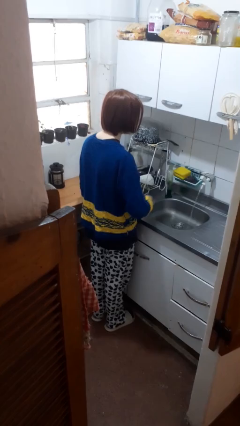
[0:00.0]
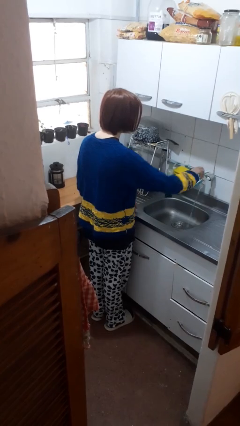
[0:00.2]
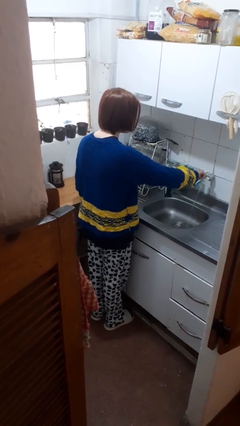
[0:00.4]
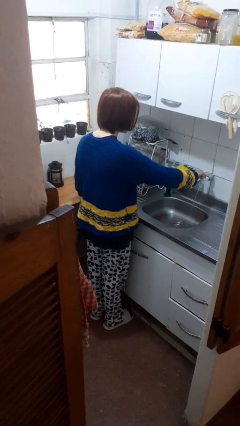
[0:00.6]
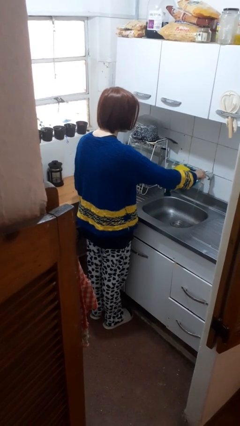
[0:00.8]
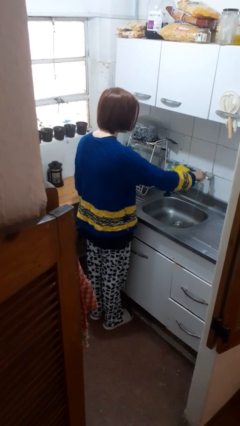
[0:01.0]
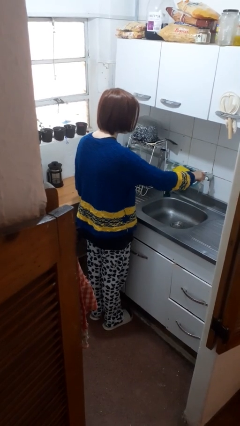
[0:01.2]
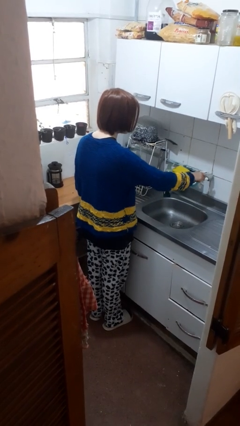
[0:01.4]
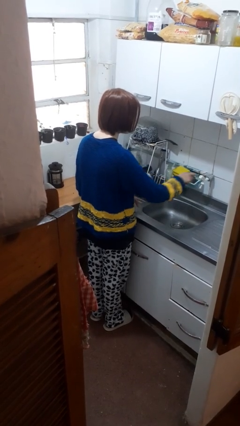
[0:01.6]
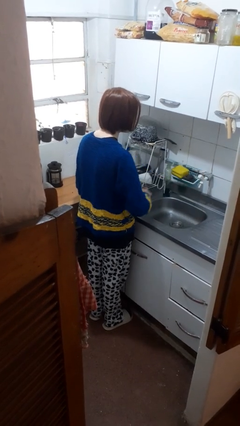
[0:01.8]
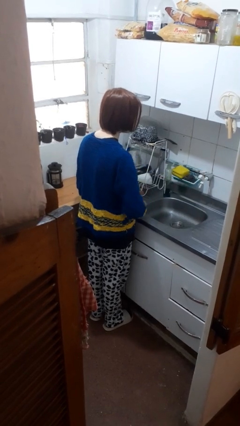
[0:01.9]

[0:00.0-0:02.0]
person turns off faucet

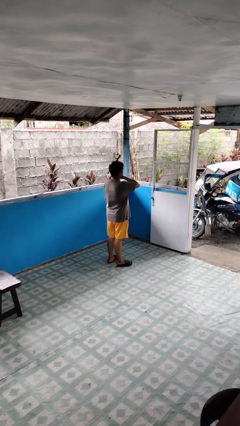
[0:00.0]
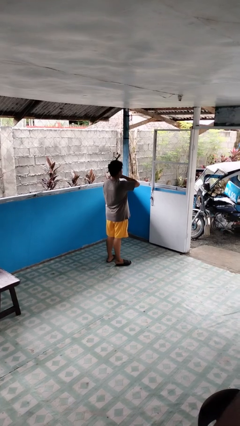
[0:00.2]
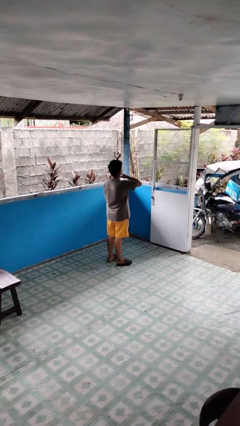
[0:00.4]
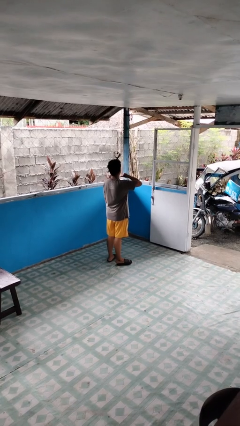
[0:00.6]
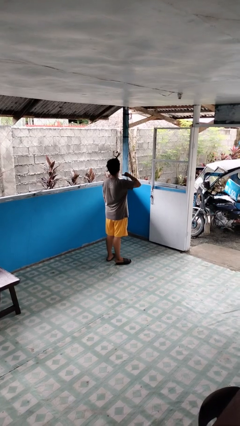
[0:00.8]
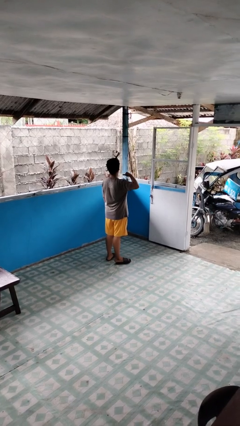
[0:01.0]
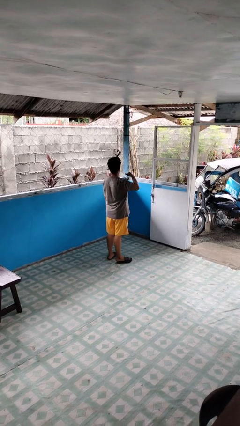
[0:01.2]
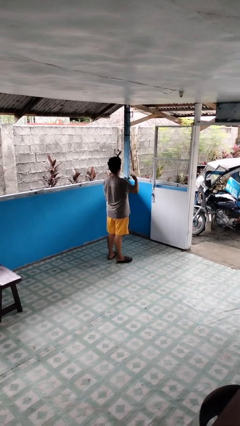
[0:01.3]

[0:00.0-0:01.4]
person gestures cut

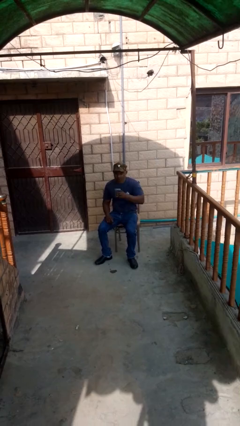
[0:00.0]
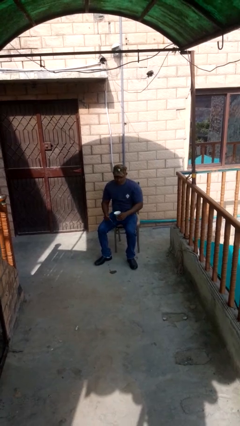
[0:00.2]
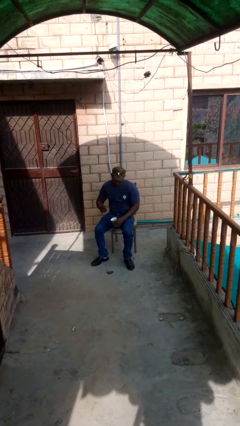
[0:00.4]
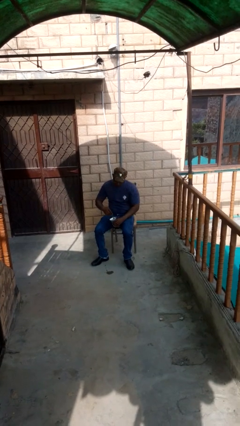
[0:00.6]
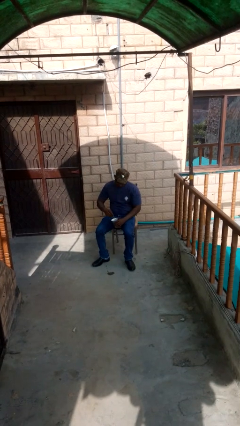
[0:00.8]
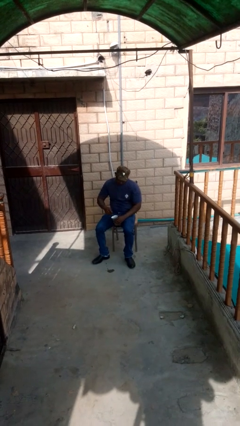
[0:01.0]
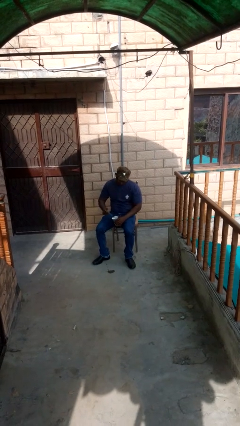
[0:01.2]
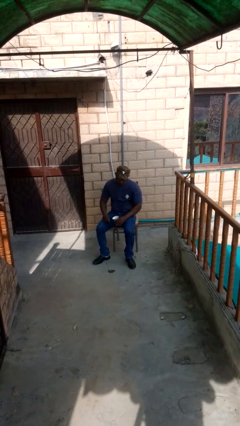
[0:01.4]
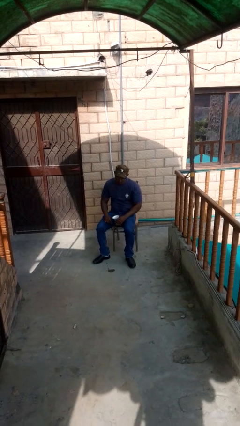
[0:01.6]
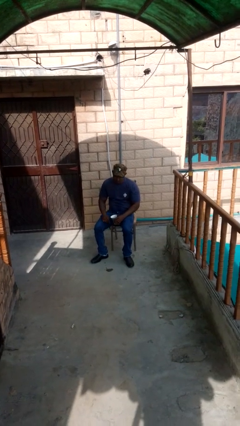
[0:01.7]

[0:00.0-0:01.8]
person stirs mug

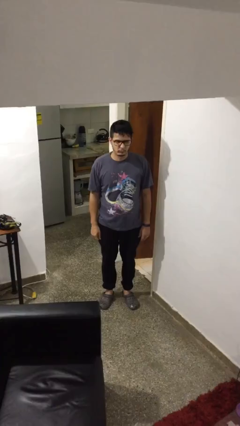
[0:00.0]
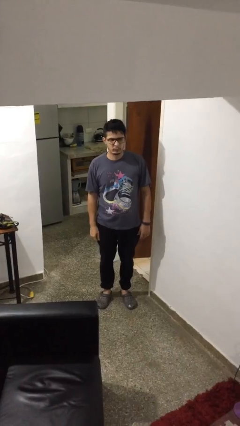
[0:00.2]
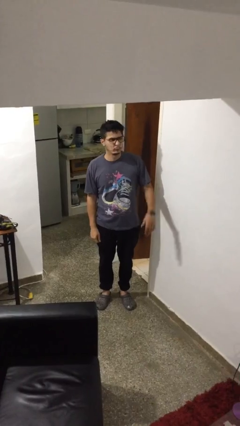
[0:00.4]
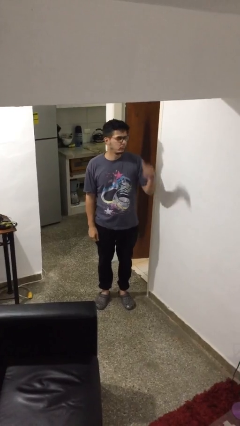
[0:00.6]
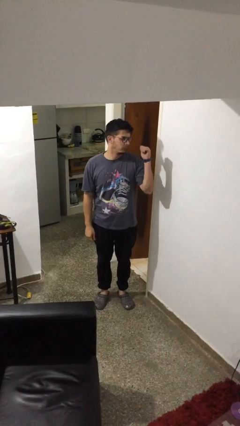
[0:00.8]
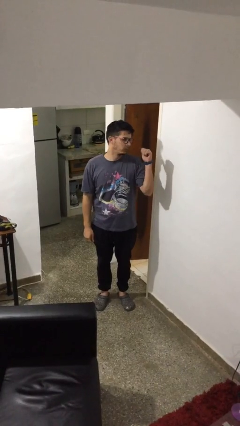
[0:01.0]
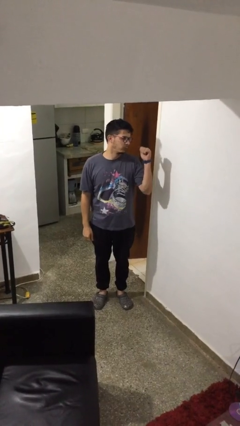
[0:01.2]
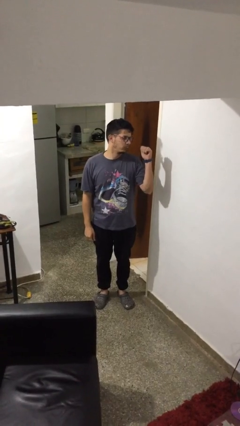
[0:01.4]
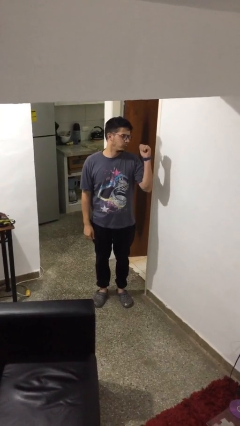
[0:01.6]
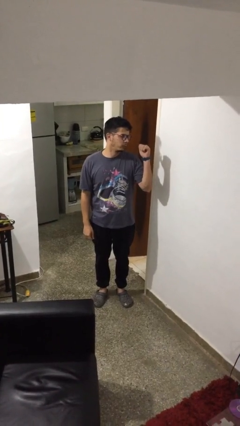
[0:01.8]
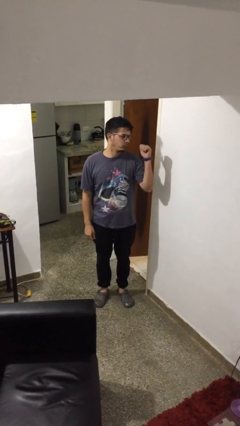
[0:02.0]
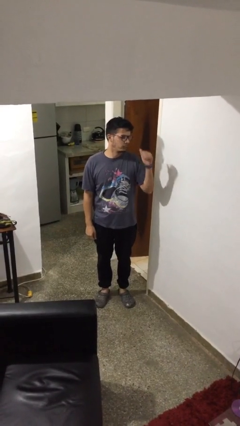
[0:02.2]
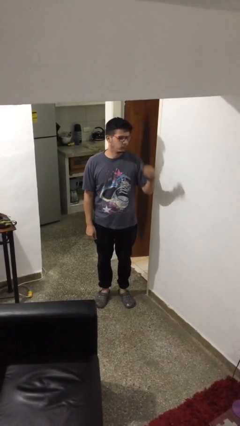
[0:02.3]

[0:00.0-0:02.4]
person gestures behind me

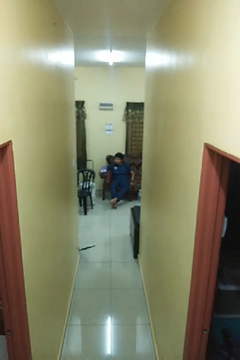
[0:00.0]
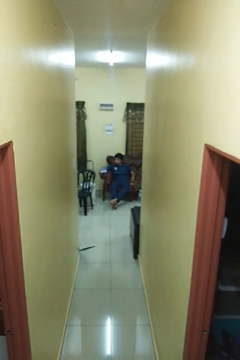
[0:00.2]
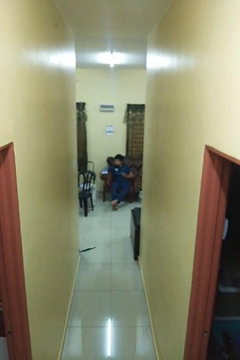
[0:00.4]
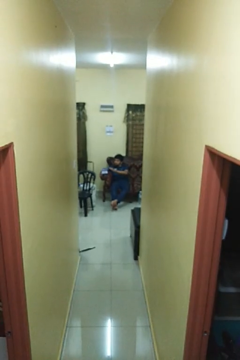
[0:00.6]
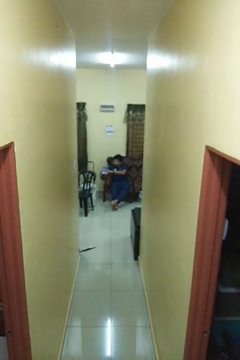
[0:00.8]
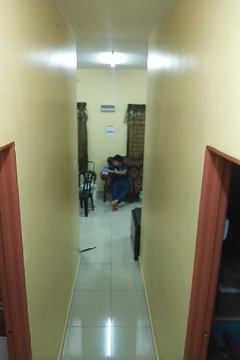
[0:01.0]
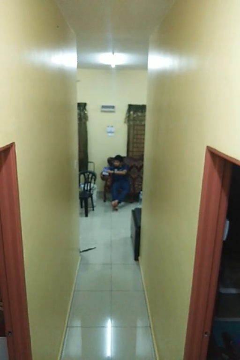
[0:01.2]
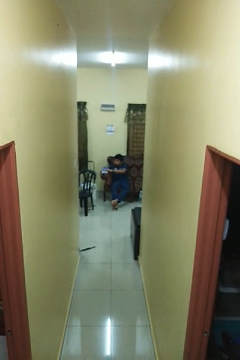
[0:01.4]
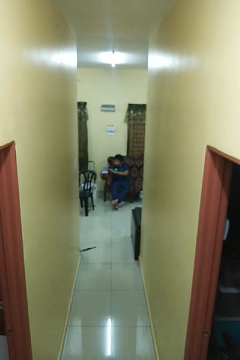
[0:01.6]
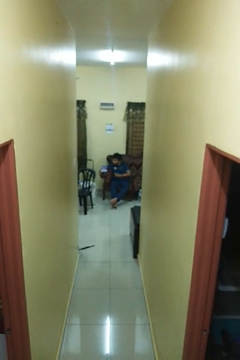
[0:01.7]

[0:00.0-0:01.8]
person taps object with finger

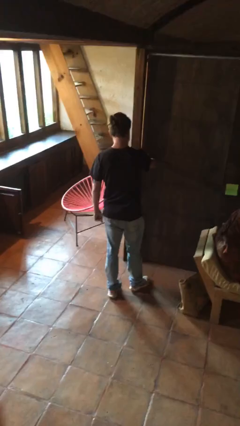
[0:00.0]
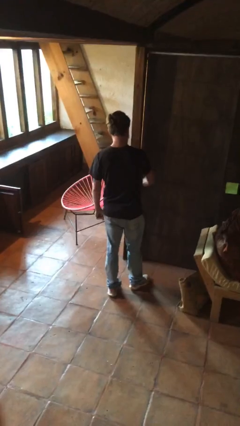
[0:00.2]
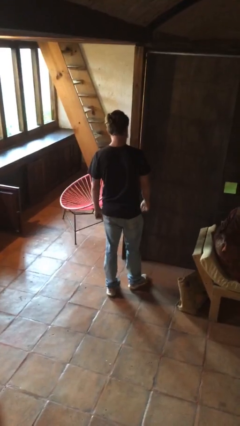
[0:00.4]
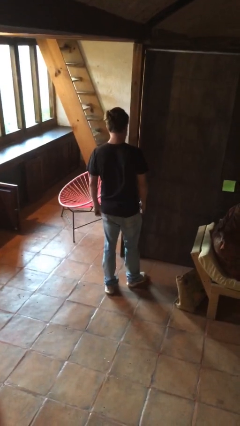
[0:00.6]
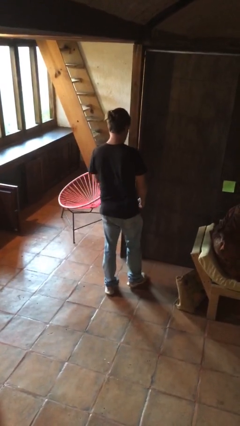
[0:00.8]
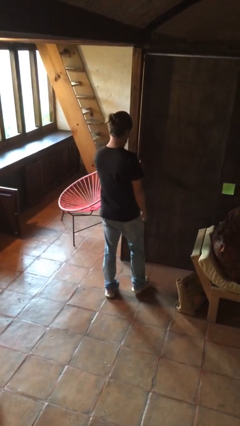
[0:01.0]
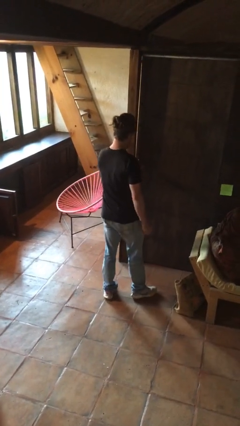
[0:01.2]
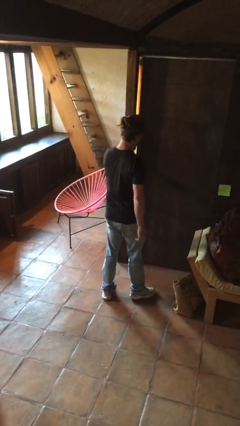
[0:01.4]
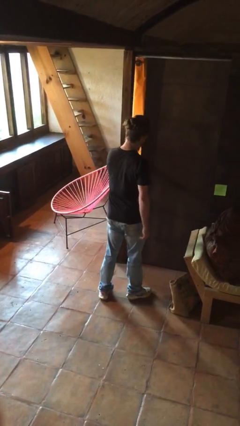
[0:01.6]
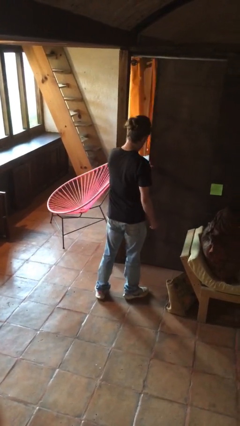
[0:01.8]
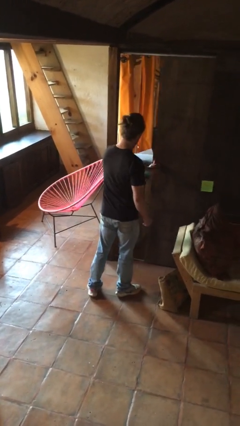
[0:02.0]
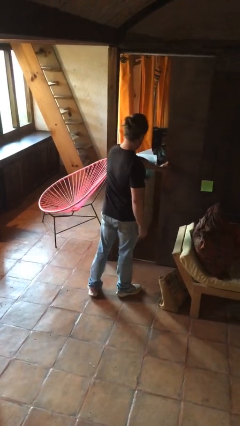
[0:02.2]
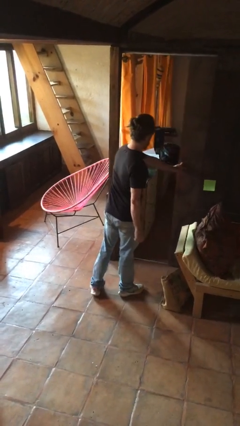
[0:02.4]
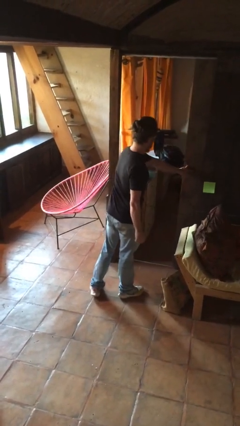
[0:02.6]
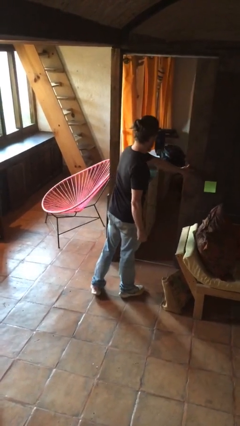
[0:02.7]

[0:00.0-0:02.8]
person opens facility door

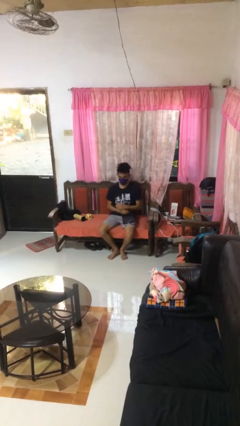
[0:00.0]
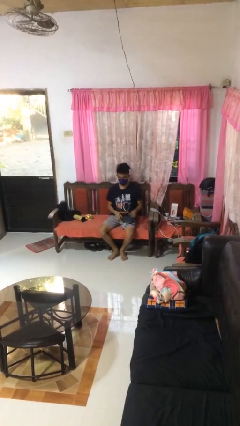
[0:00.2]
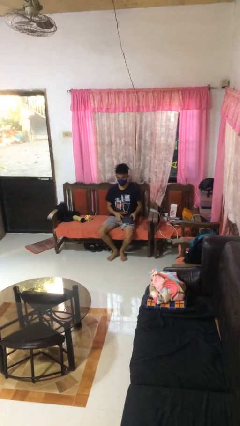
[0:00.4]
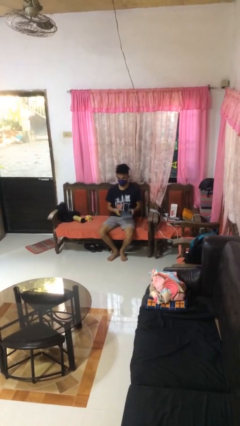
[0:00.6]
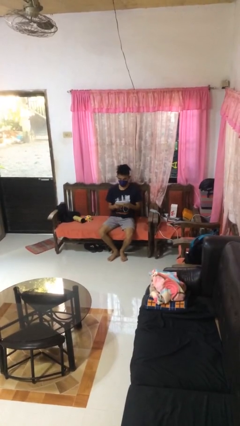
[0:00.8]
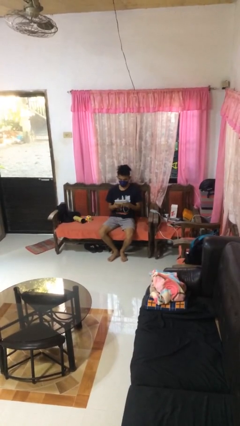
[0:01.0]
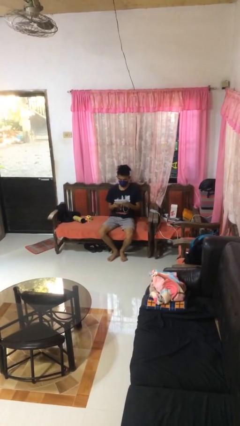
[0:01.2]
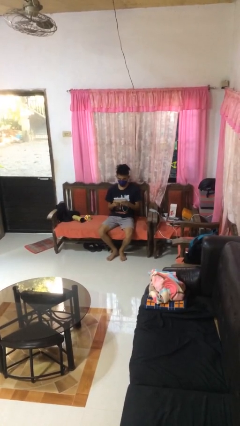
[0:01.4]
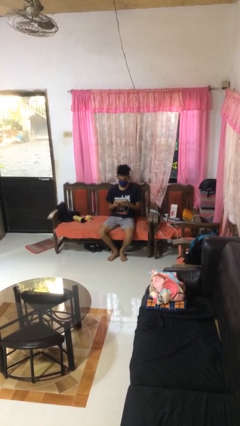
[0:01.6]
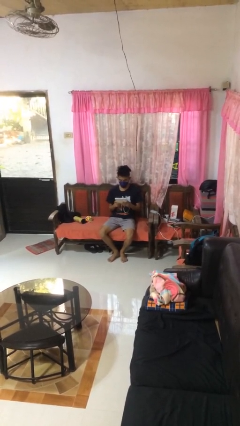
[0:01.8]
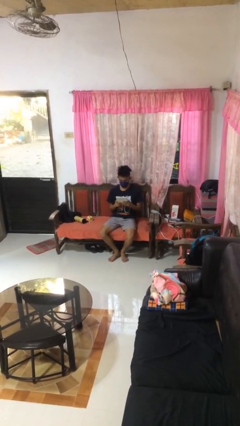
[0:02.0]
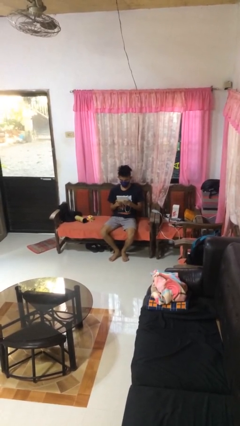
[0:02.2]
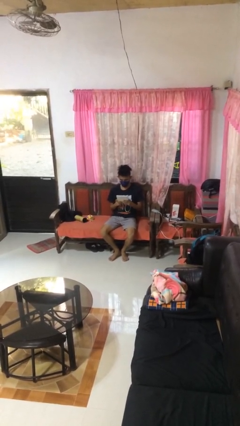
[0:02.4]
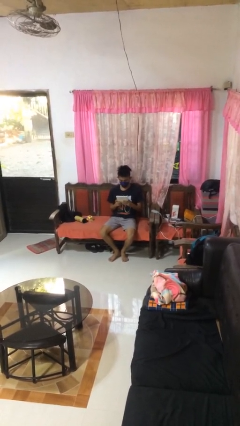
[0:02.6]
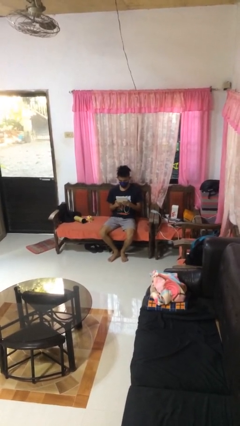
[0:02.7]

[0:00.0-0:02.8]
person interacts with tablet

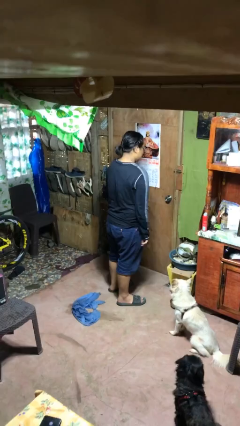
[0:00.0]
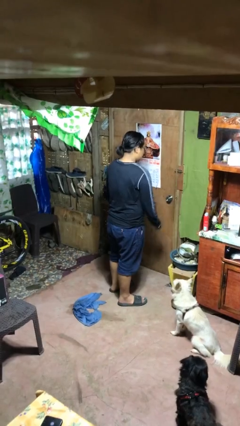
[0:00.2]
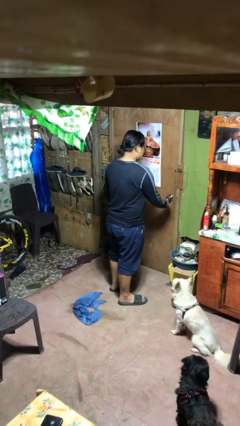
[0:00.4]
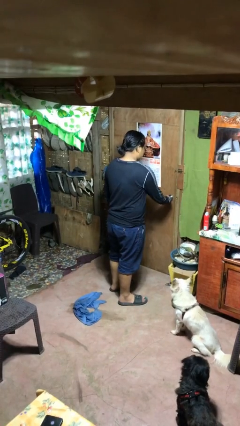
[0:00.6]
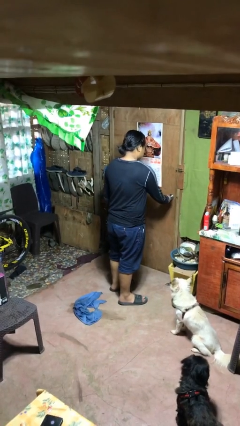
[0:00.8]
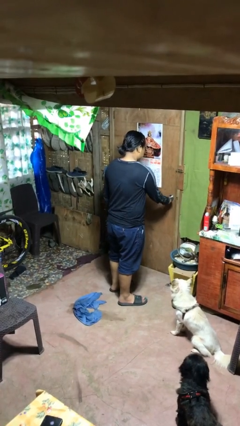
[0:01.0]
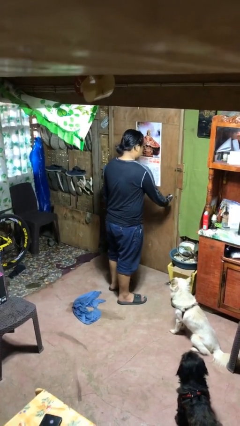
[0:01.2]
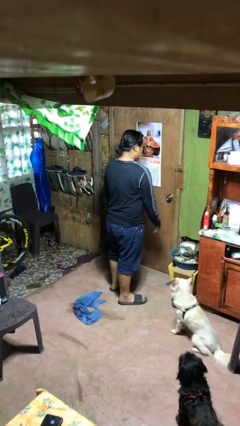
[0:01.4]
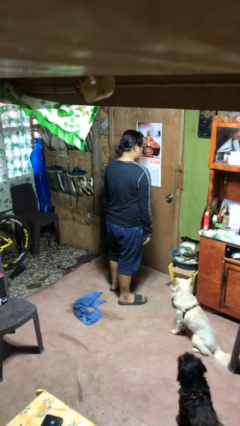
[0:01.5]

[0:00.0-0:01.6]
person unlocks door with keys
